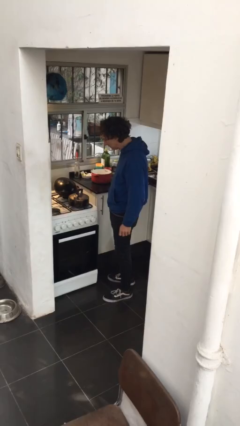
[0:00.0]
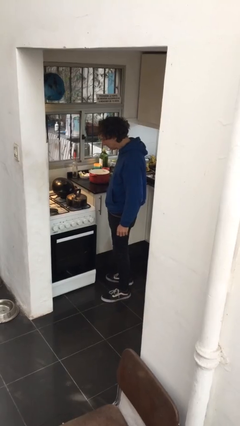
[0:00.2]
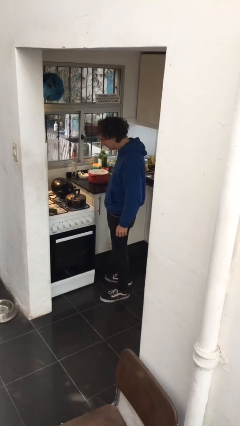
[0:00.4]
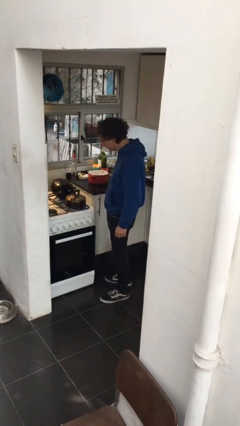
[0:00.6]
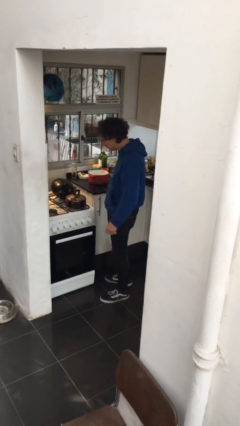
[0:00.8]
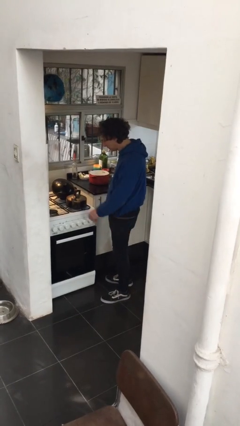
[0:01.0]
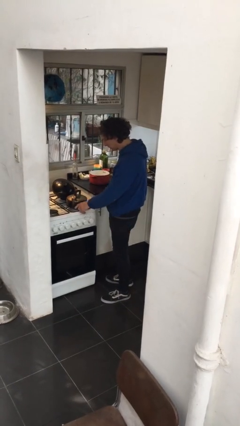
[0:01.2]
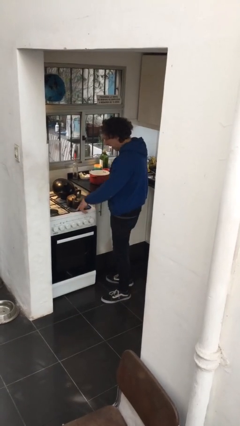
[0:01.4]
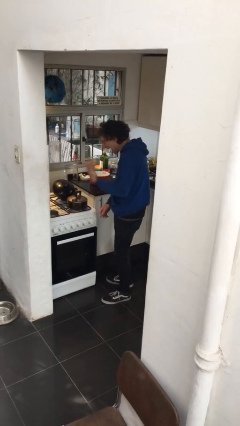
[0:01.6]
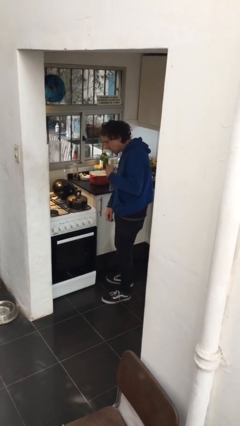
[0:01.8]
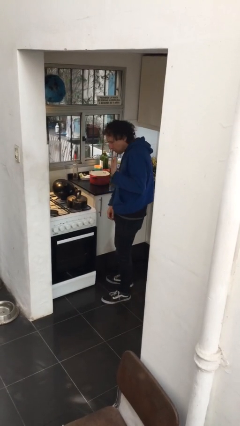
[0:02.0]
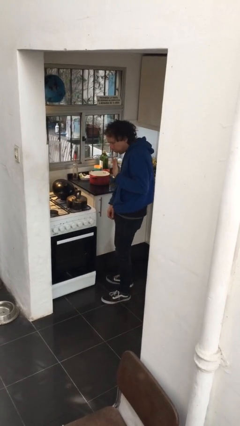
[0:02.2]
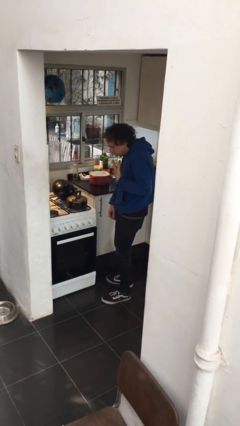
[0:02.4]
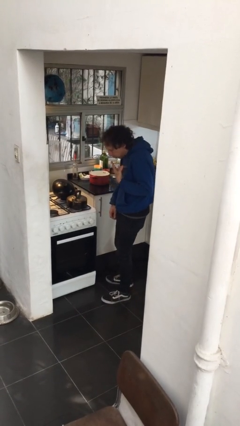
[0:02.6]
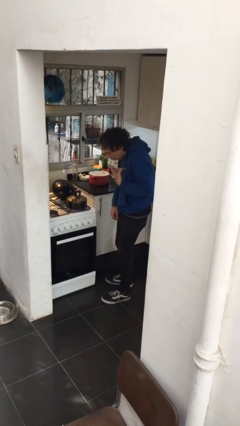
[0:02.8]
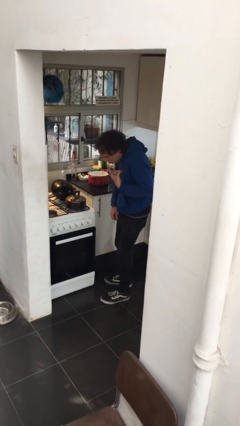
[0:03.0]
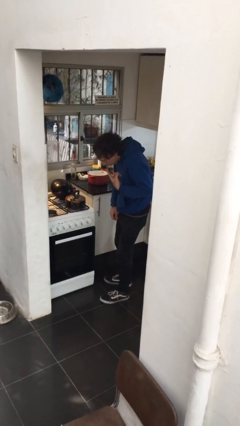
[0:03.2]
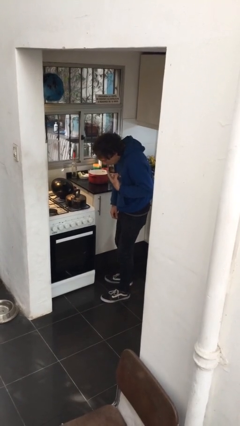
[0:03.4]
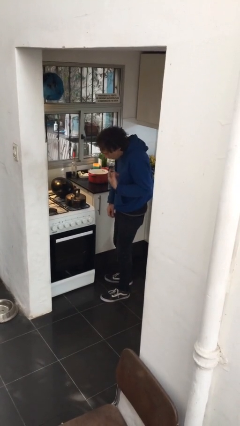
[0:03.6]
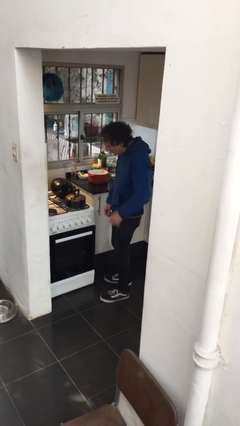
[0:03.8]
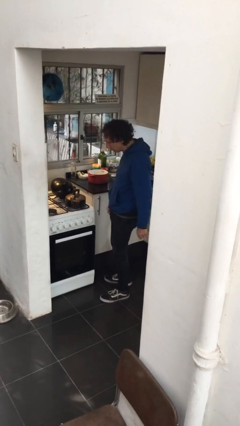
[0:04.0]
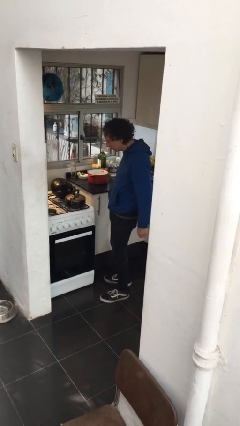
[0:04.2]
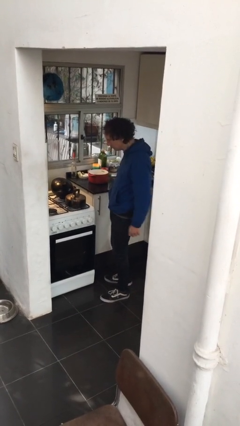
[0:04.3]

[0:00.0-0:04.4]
person burns hand

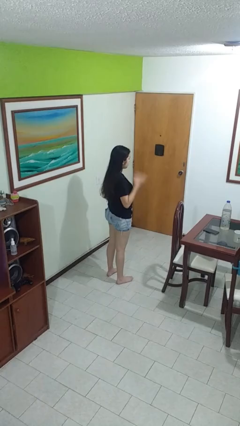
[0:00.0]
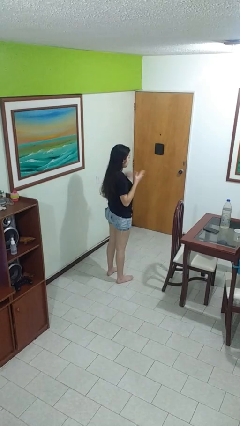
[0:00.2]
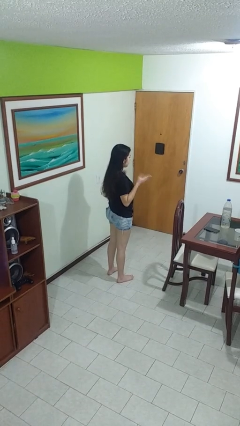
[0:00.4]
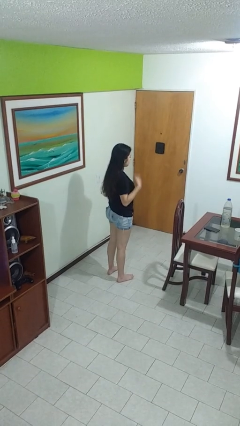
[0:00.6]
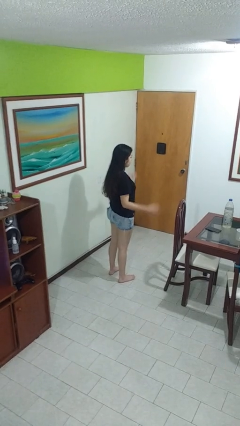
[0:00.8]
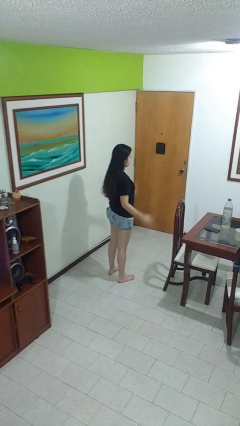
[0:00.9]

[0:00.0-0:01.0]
person drums on chest

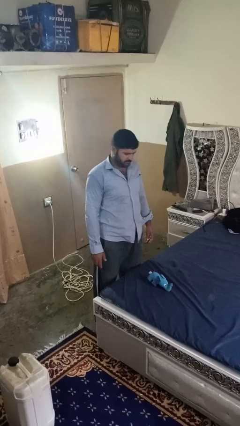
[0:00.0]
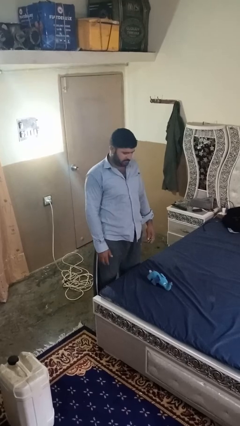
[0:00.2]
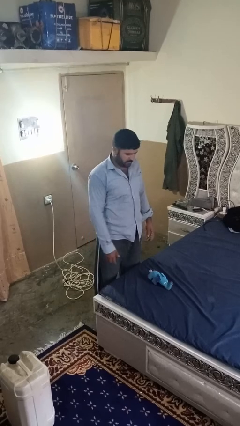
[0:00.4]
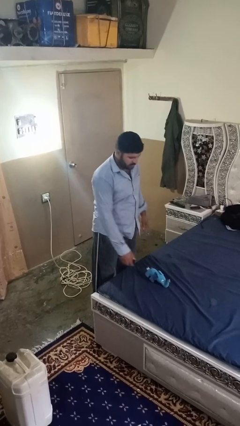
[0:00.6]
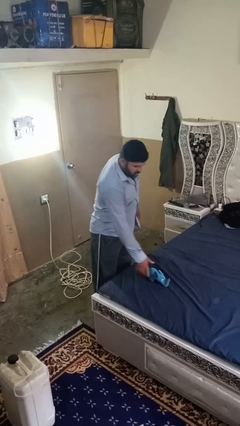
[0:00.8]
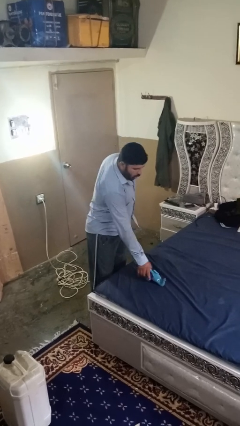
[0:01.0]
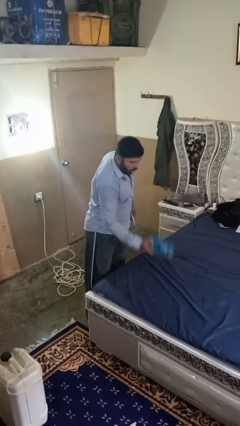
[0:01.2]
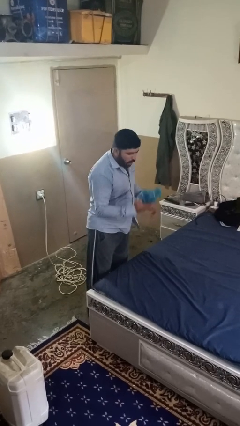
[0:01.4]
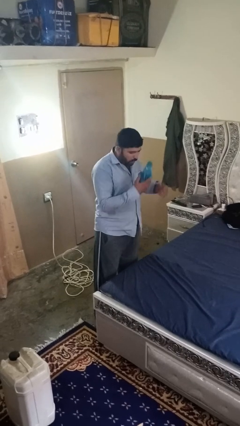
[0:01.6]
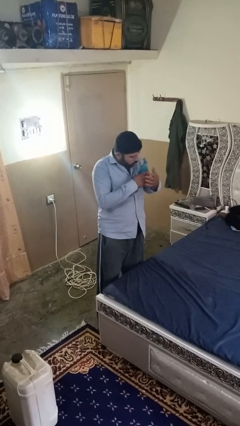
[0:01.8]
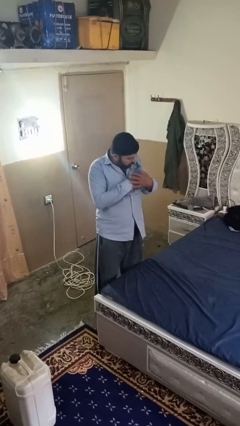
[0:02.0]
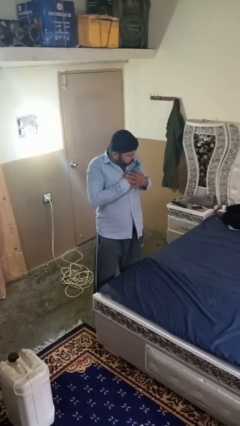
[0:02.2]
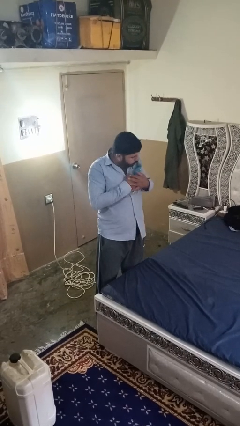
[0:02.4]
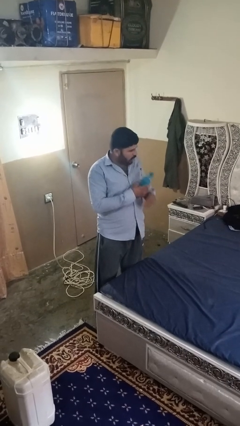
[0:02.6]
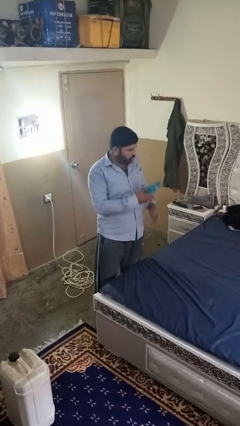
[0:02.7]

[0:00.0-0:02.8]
person hugs stuffed animal

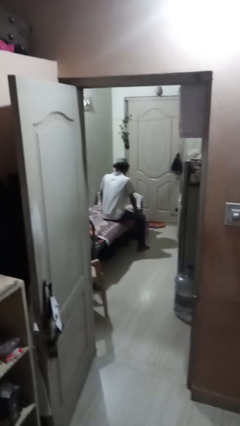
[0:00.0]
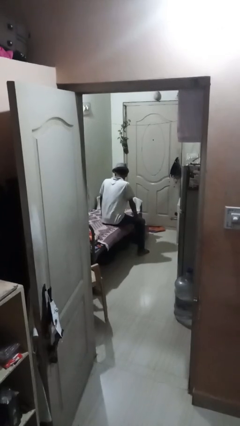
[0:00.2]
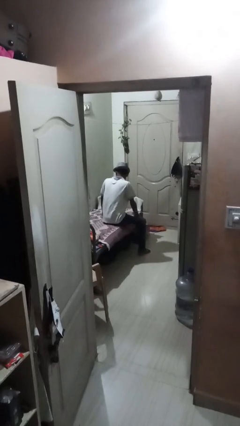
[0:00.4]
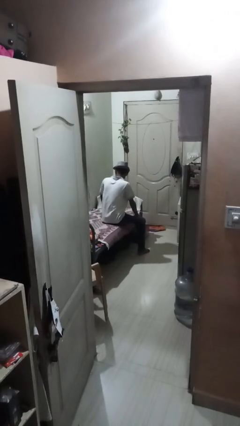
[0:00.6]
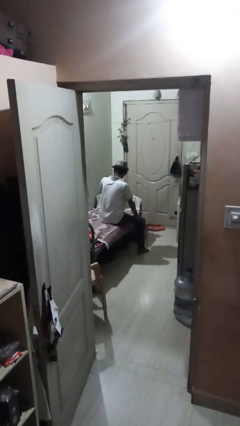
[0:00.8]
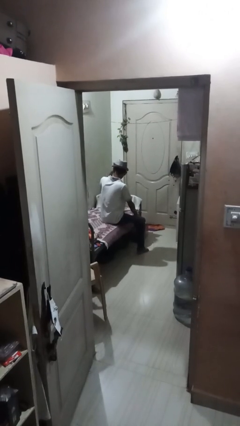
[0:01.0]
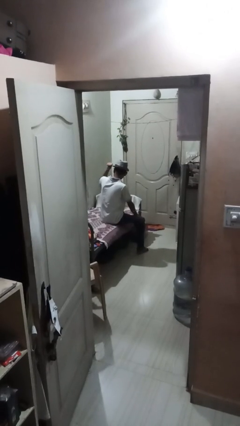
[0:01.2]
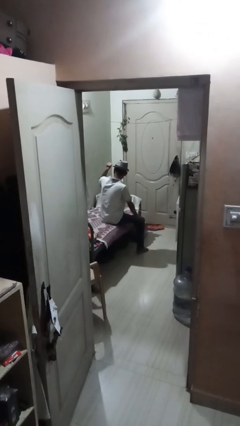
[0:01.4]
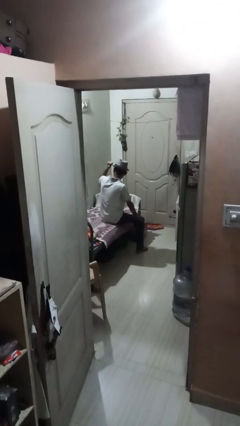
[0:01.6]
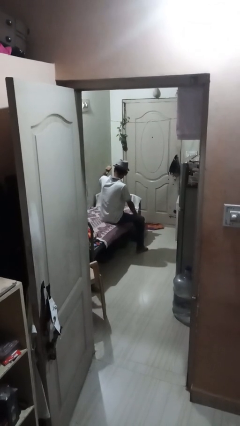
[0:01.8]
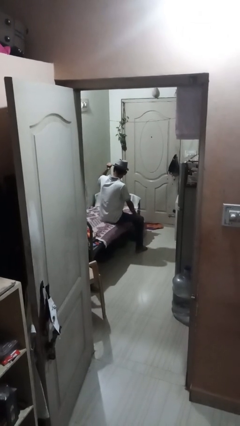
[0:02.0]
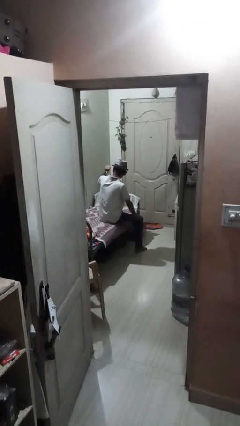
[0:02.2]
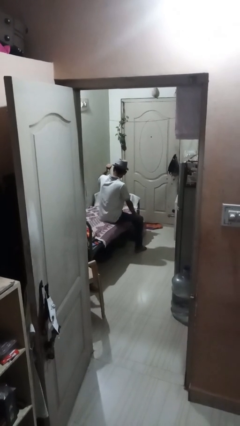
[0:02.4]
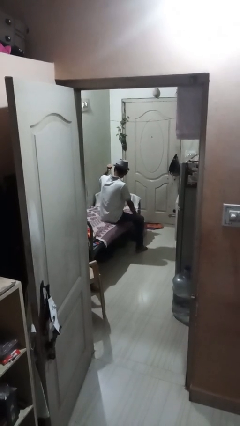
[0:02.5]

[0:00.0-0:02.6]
person gestures behind me

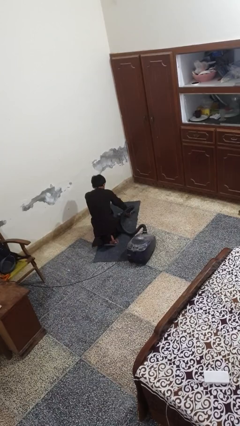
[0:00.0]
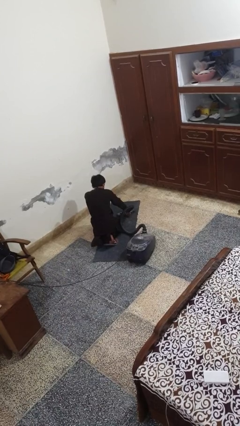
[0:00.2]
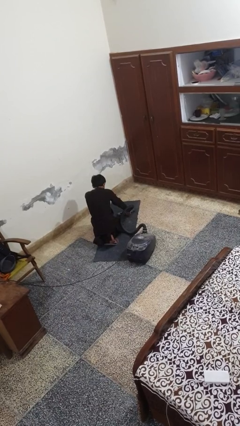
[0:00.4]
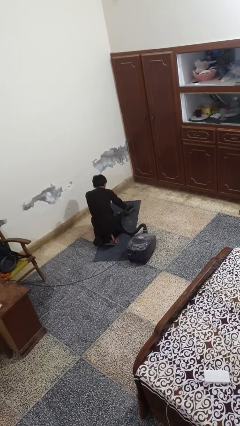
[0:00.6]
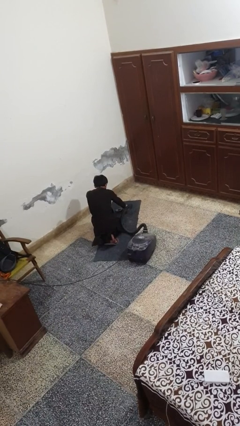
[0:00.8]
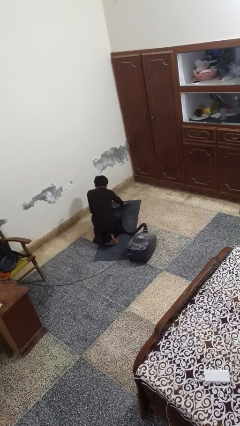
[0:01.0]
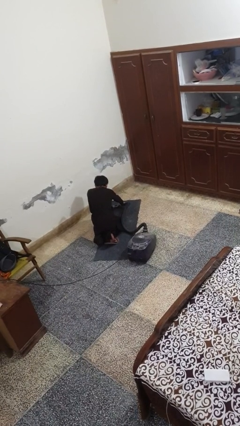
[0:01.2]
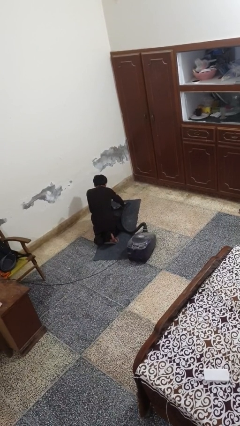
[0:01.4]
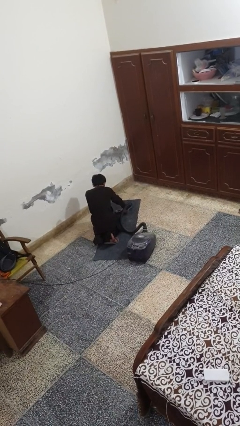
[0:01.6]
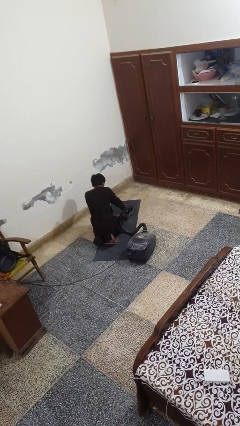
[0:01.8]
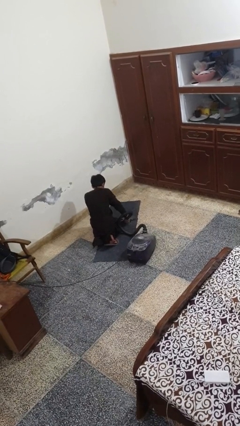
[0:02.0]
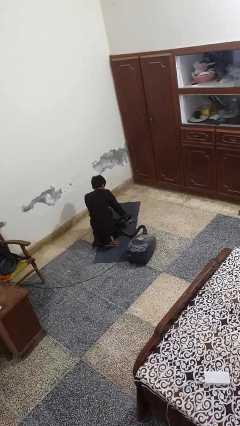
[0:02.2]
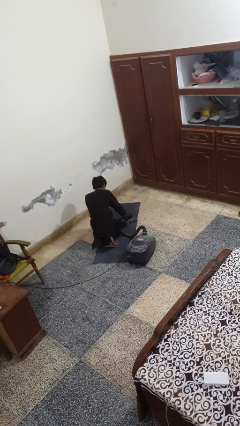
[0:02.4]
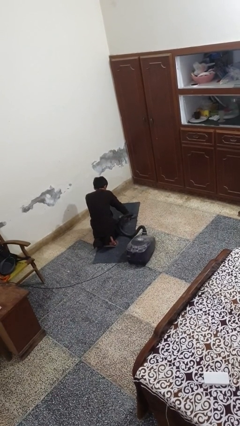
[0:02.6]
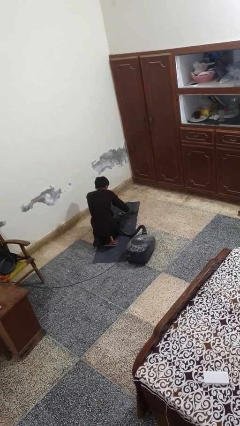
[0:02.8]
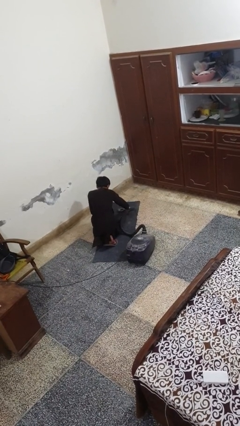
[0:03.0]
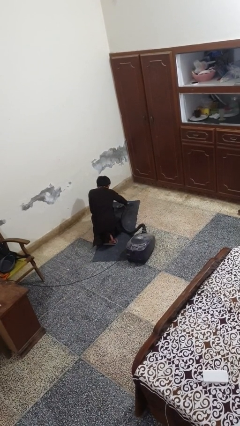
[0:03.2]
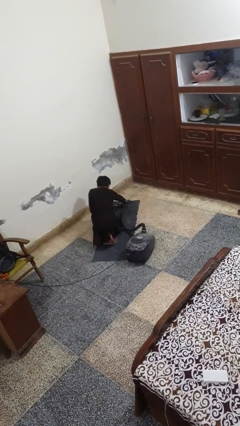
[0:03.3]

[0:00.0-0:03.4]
person vacuums carpet

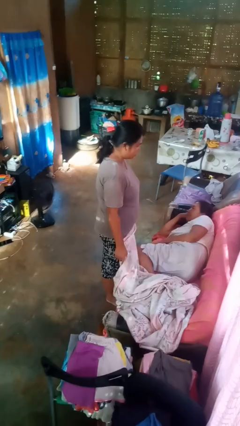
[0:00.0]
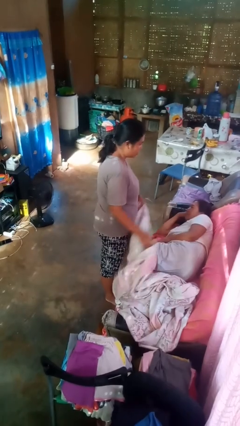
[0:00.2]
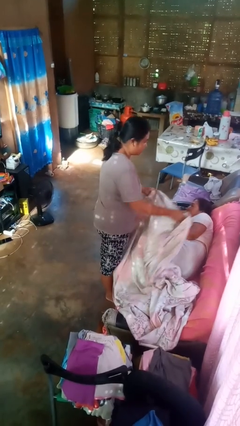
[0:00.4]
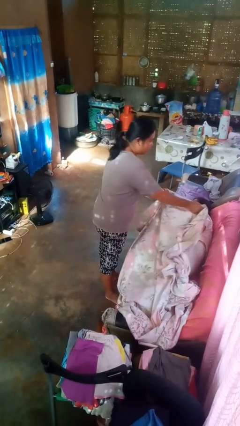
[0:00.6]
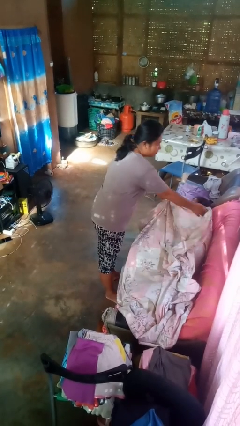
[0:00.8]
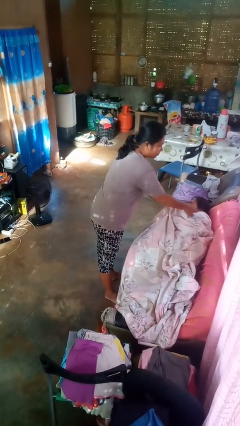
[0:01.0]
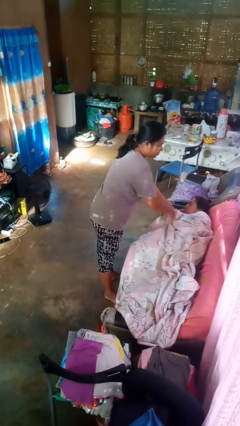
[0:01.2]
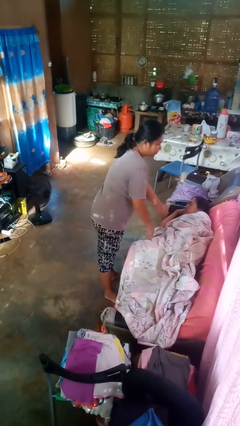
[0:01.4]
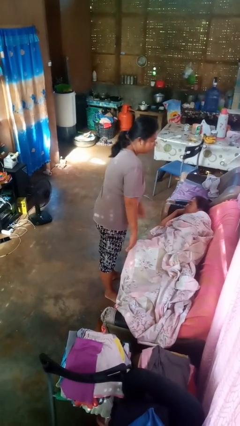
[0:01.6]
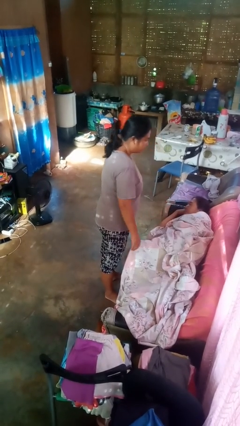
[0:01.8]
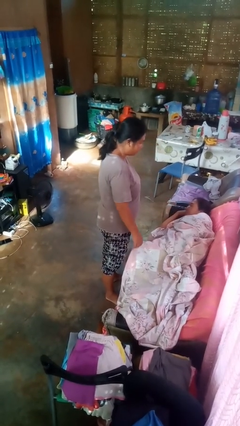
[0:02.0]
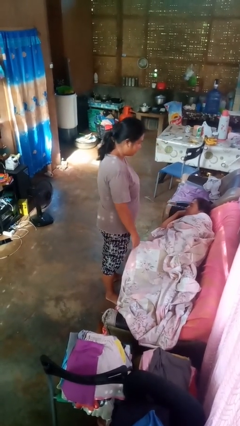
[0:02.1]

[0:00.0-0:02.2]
person covers friend with blanket

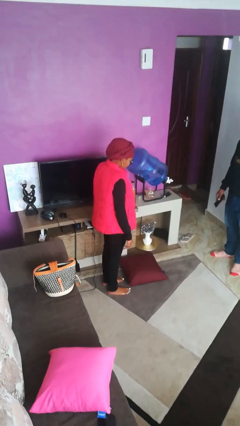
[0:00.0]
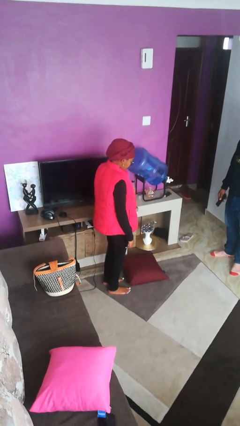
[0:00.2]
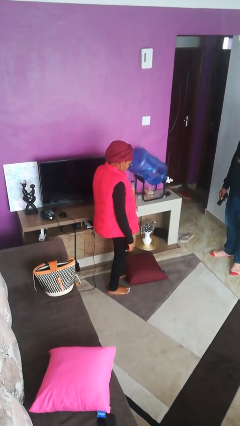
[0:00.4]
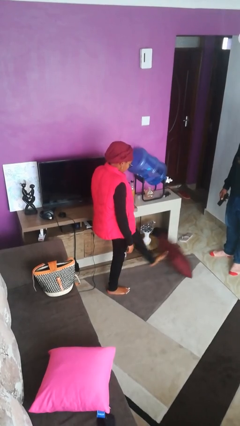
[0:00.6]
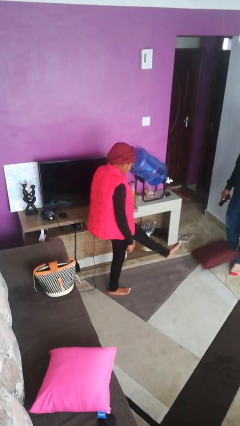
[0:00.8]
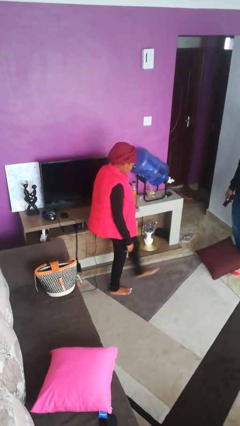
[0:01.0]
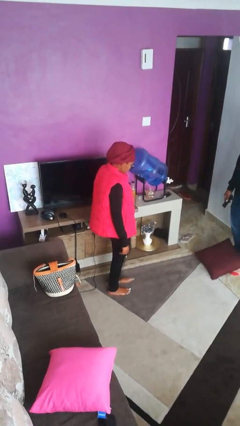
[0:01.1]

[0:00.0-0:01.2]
person kicks object to person
